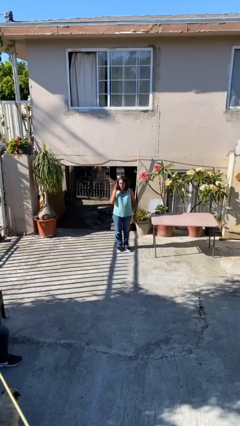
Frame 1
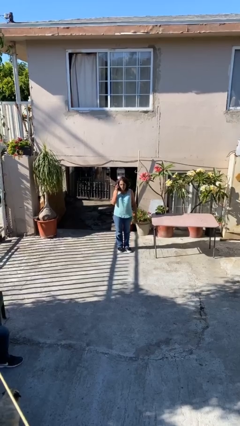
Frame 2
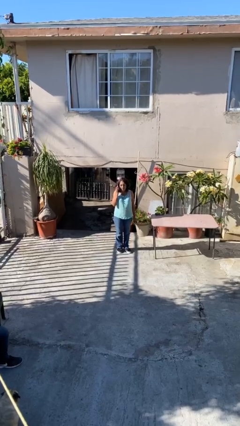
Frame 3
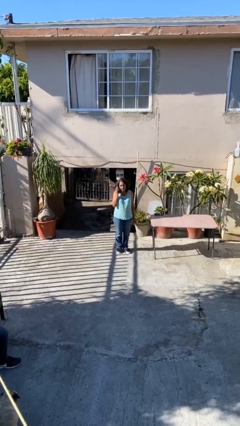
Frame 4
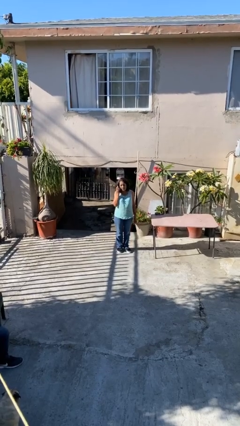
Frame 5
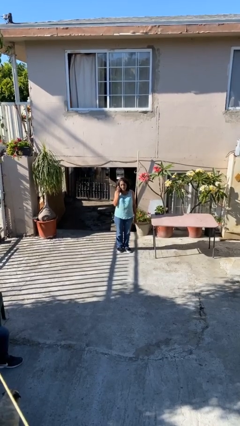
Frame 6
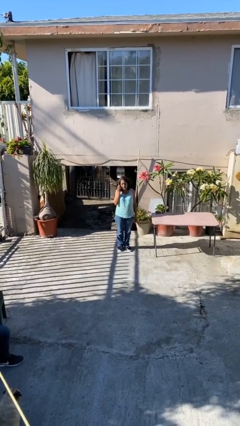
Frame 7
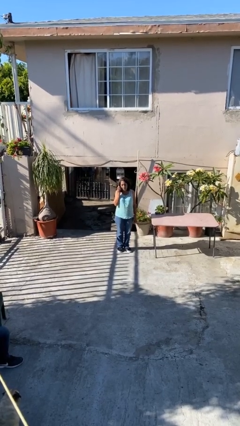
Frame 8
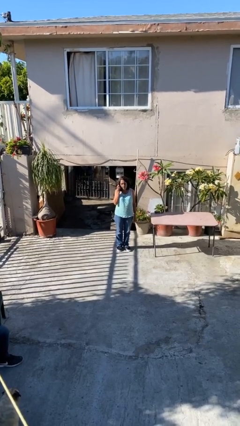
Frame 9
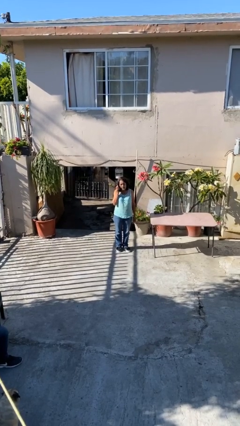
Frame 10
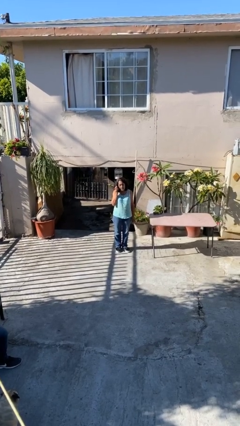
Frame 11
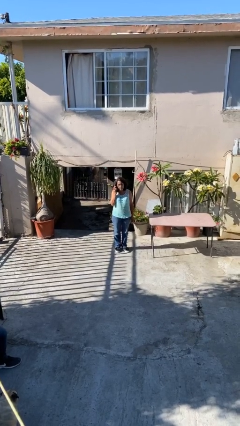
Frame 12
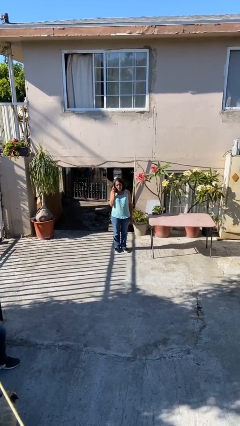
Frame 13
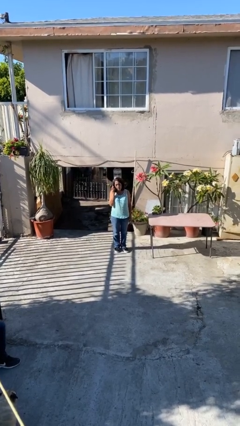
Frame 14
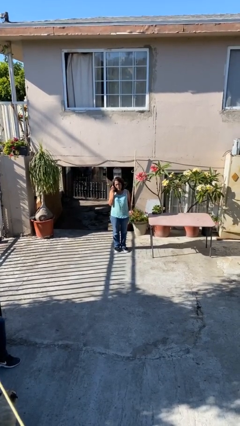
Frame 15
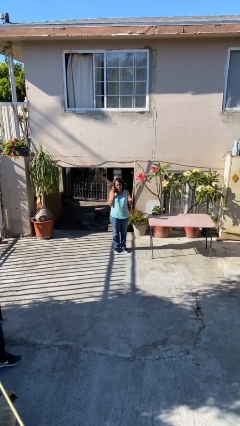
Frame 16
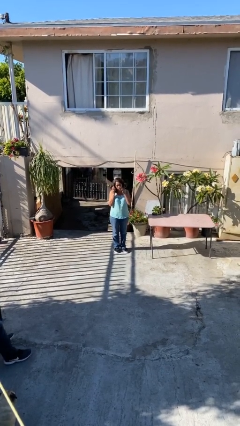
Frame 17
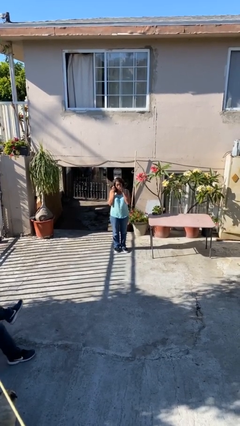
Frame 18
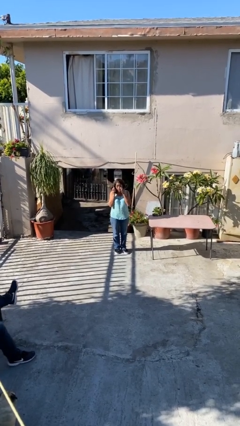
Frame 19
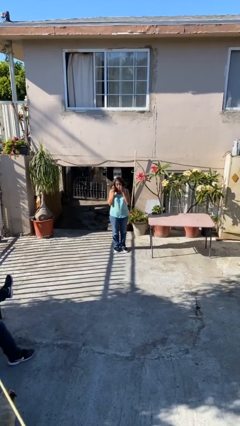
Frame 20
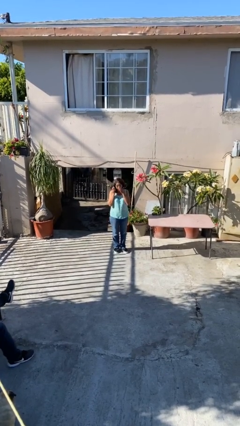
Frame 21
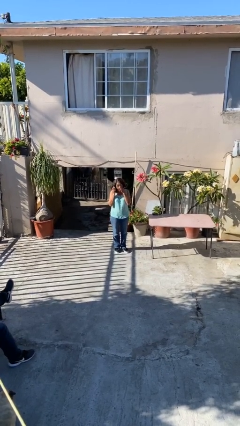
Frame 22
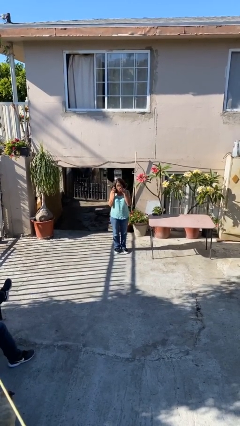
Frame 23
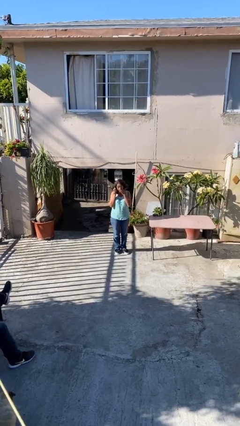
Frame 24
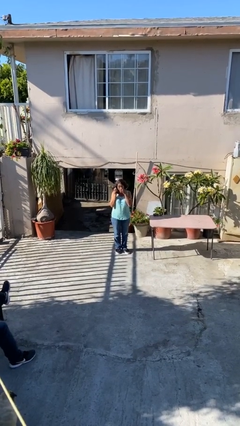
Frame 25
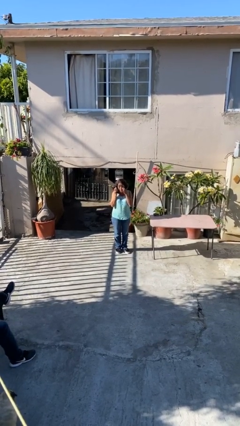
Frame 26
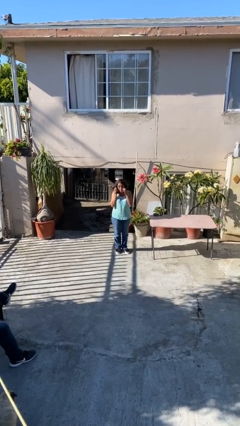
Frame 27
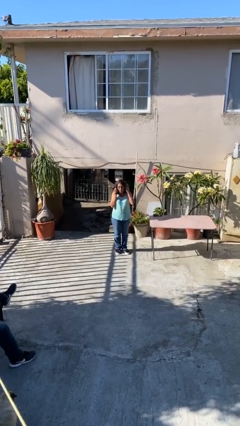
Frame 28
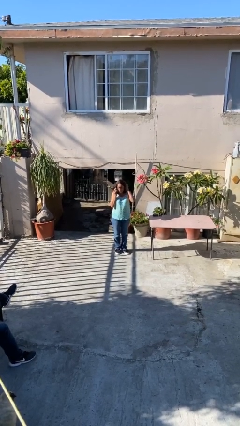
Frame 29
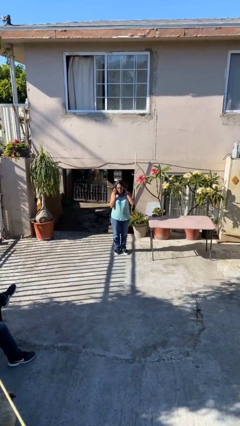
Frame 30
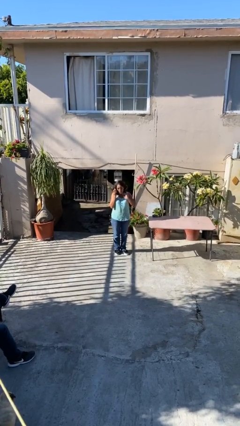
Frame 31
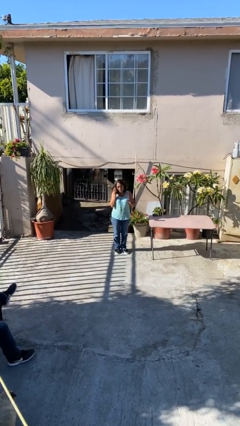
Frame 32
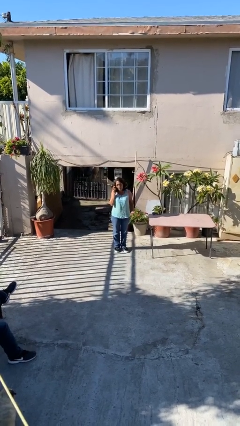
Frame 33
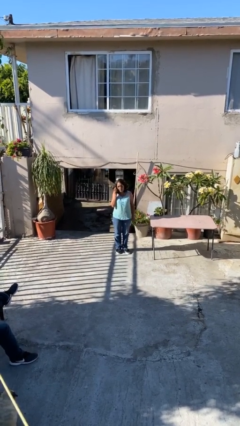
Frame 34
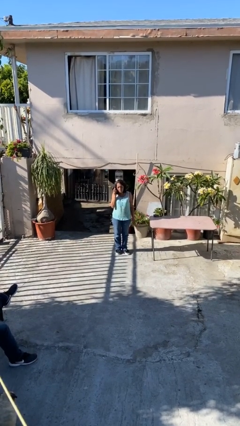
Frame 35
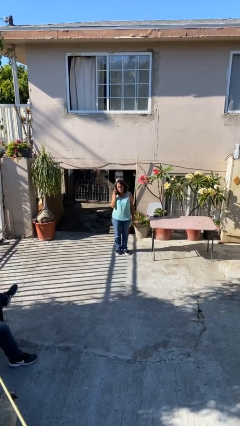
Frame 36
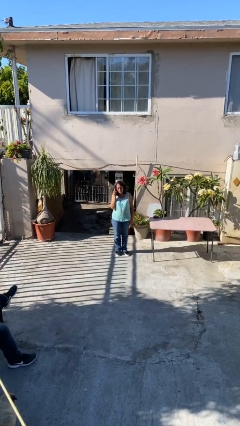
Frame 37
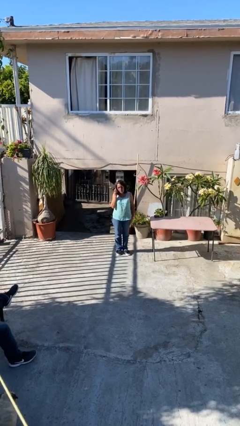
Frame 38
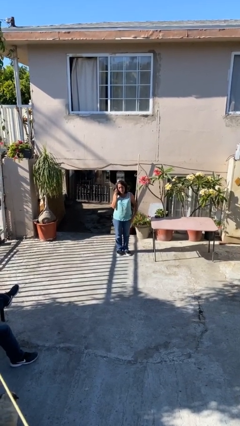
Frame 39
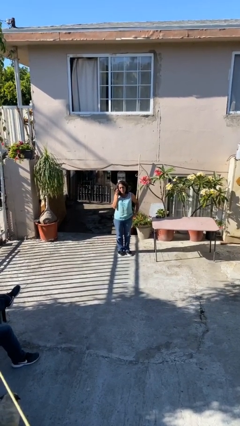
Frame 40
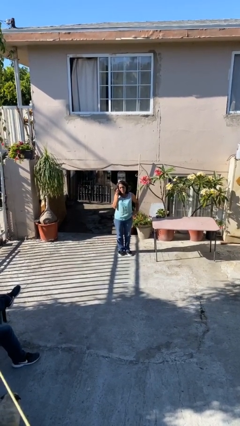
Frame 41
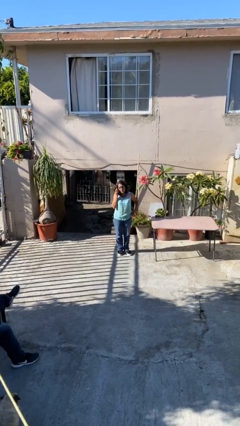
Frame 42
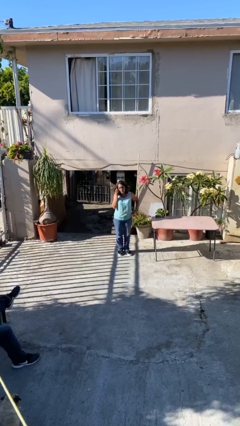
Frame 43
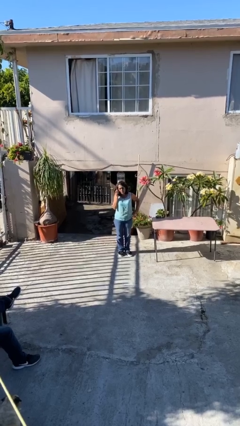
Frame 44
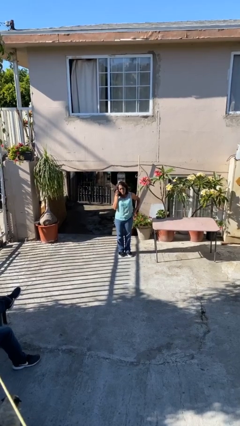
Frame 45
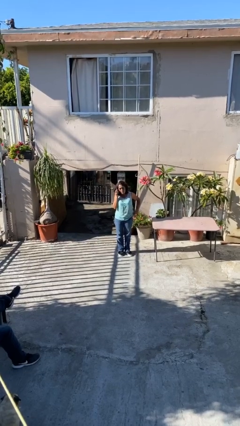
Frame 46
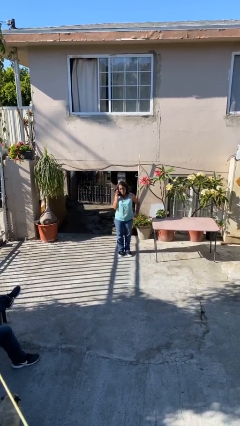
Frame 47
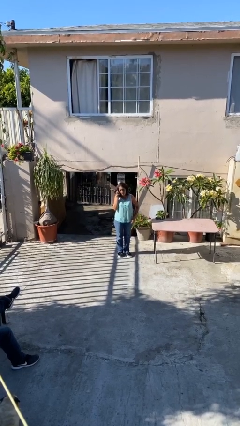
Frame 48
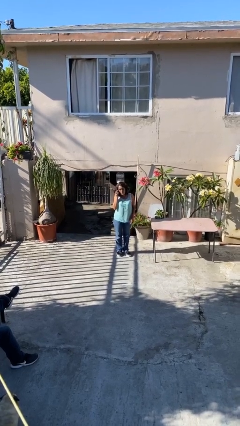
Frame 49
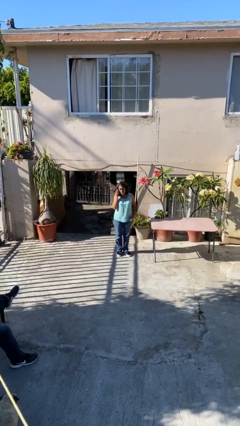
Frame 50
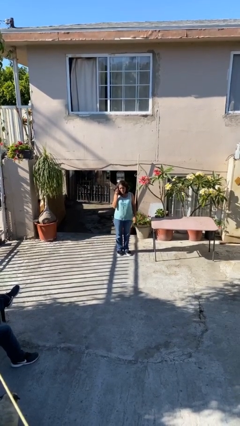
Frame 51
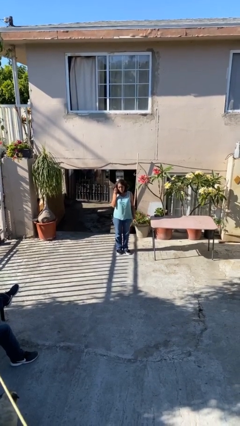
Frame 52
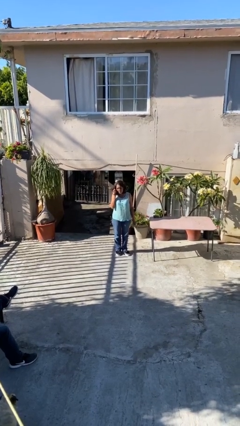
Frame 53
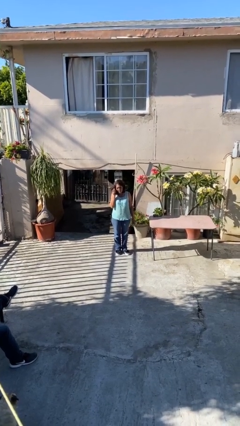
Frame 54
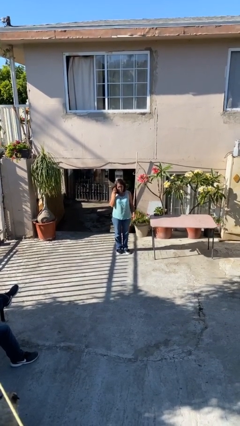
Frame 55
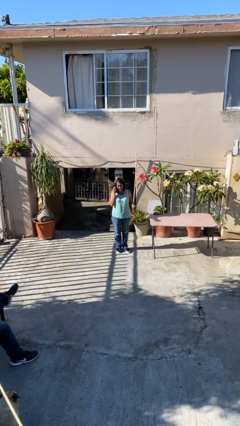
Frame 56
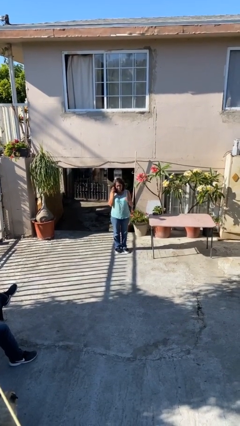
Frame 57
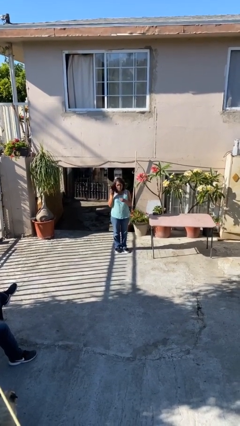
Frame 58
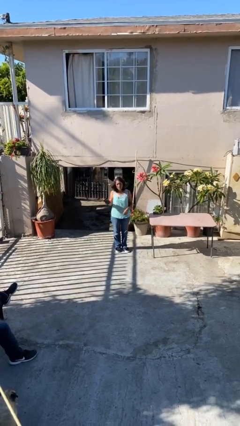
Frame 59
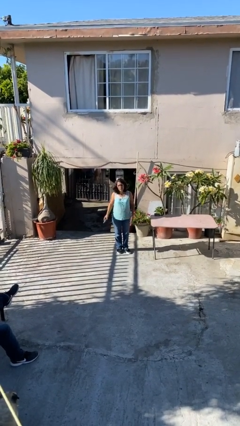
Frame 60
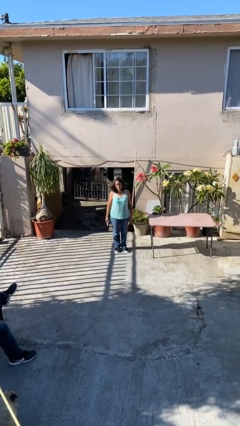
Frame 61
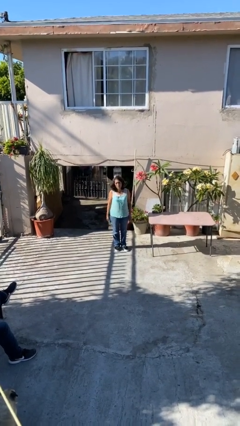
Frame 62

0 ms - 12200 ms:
person talks on phone

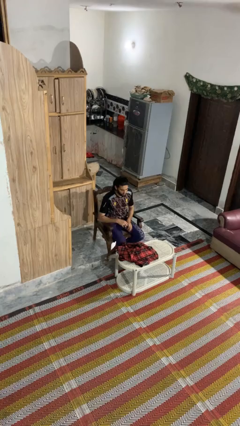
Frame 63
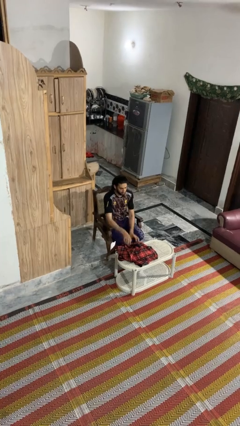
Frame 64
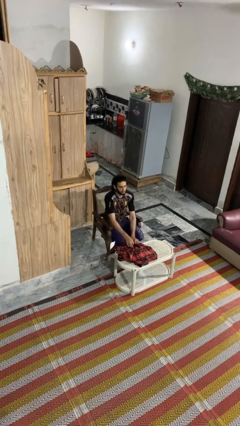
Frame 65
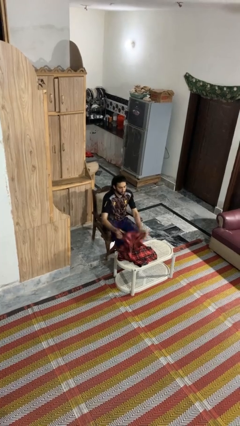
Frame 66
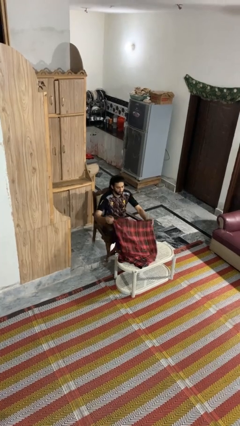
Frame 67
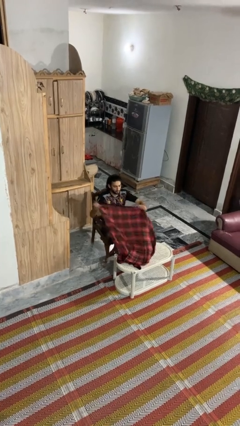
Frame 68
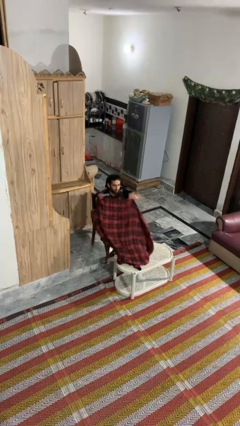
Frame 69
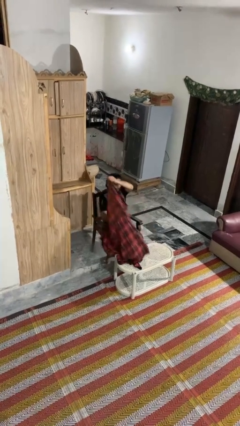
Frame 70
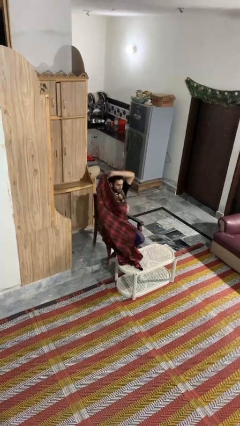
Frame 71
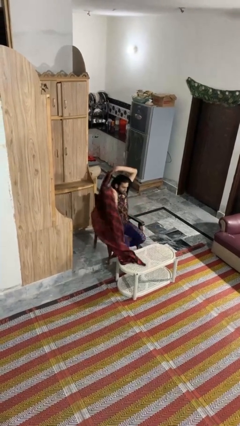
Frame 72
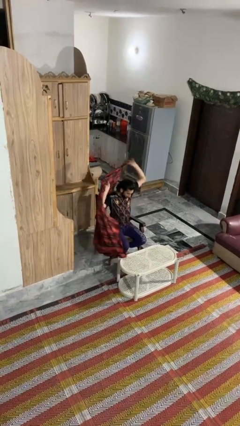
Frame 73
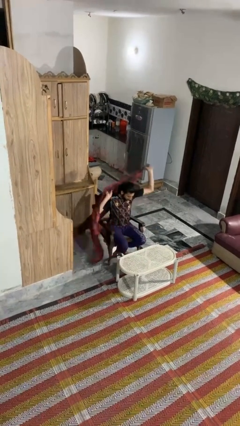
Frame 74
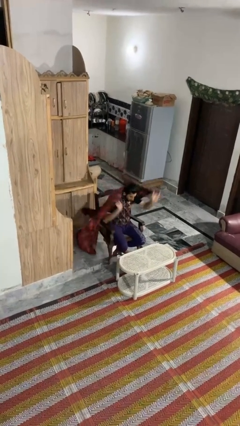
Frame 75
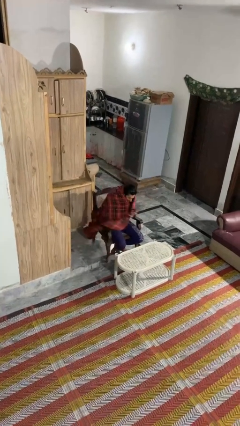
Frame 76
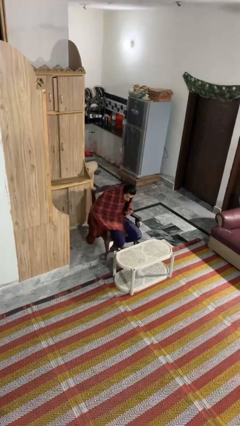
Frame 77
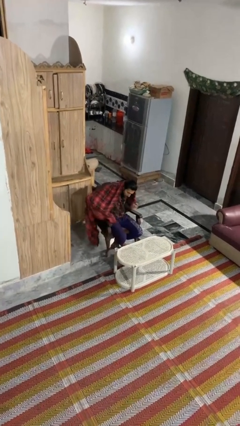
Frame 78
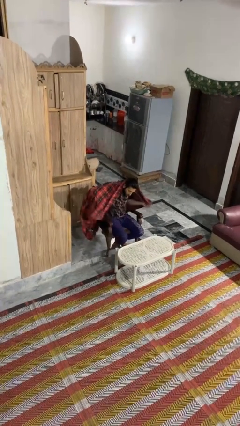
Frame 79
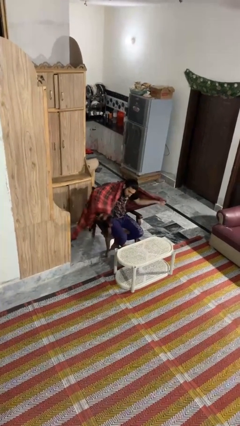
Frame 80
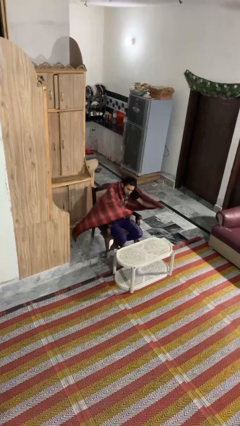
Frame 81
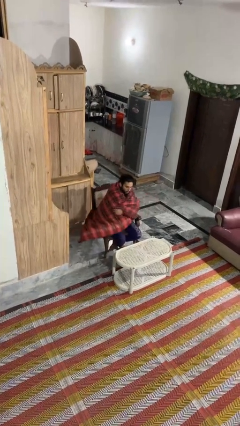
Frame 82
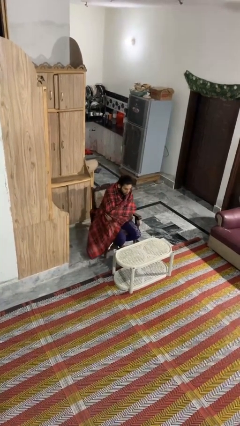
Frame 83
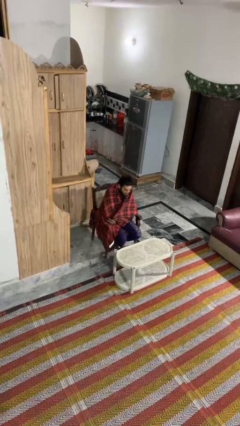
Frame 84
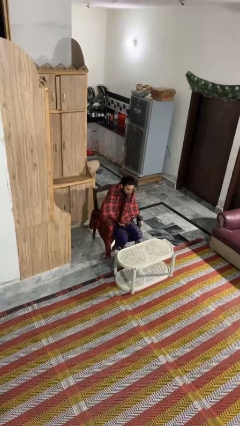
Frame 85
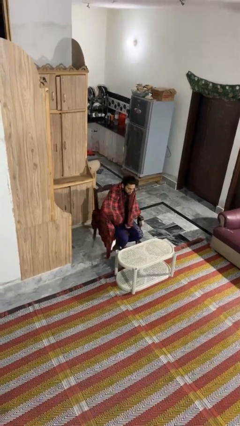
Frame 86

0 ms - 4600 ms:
person covers with blanket

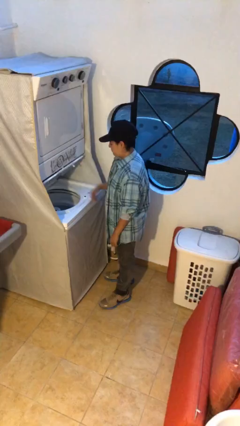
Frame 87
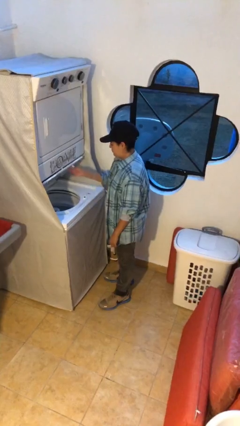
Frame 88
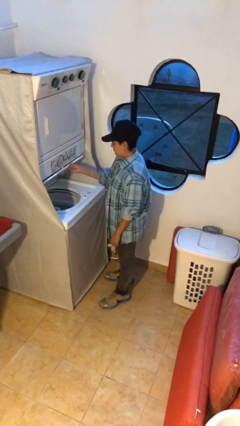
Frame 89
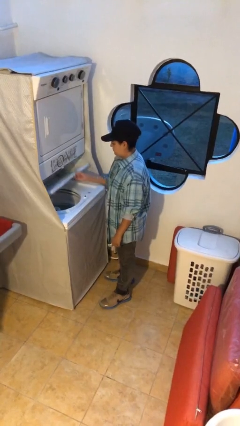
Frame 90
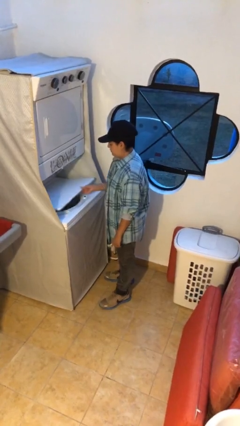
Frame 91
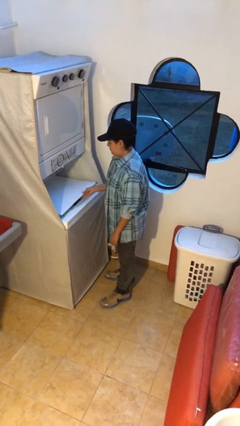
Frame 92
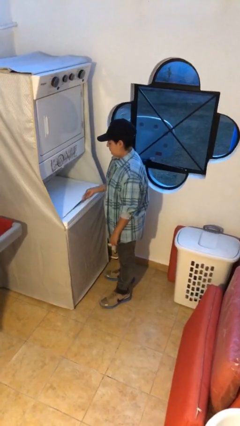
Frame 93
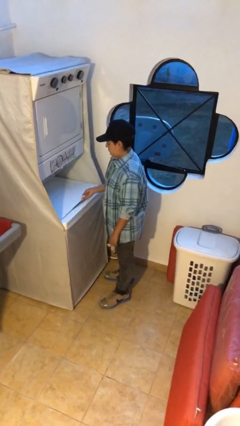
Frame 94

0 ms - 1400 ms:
person closes clothes washer
